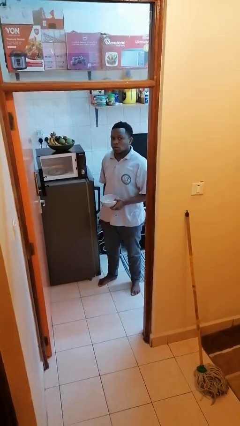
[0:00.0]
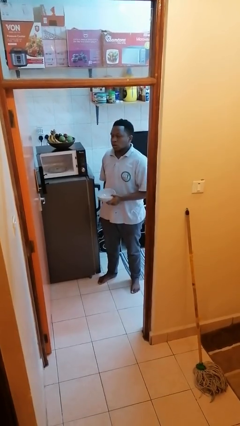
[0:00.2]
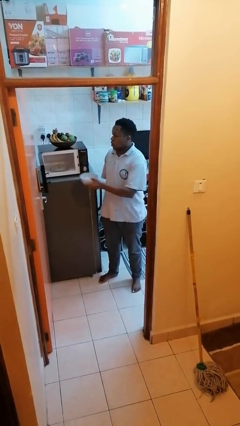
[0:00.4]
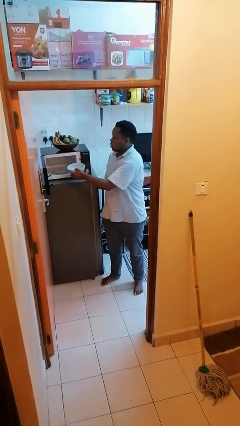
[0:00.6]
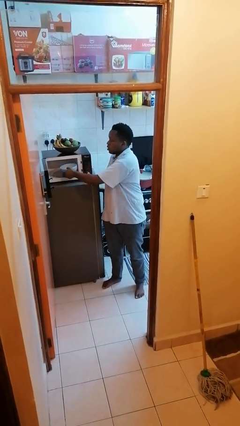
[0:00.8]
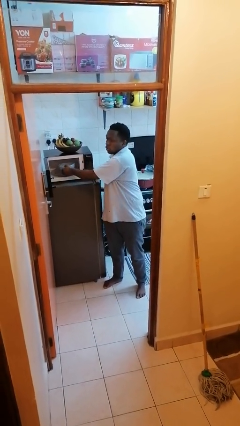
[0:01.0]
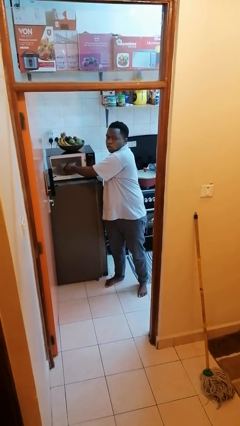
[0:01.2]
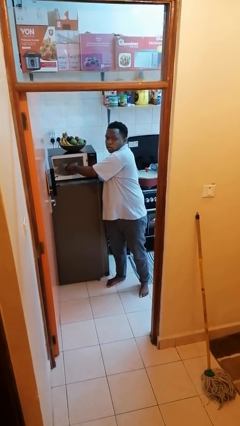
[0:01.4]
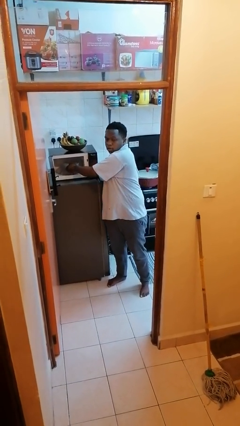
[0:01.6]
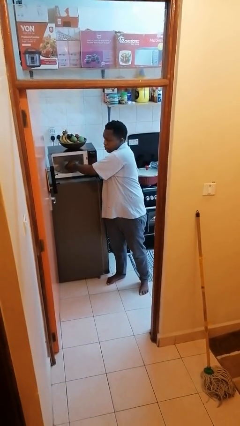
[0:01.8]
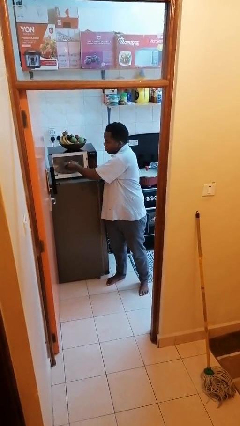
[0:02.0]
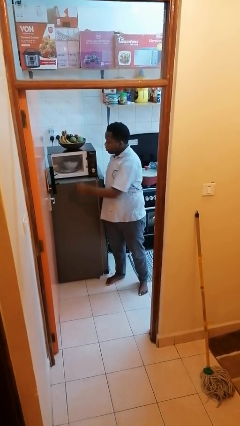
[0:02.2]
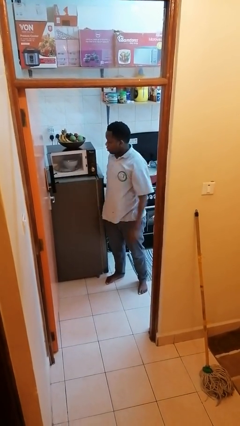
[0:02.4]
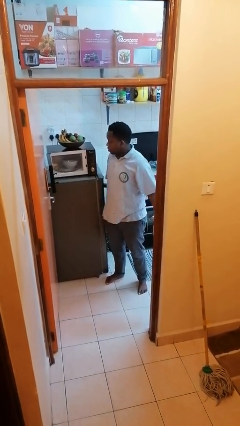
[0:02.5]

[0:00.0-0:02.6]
person puts object into microwave

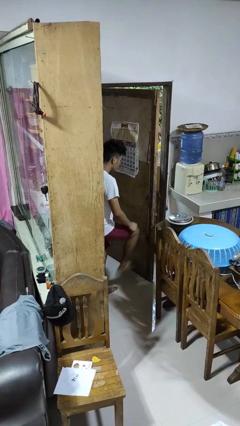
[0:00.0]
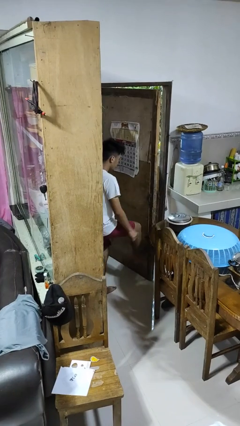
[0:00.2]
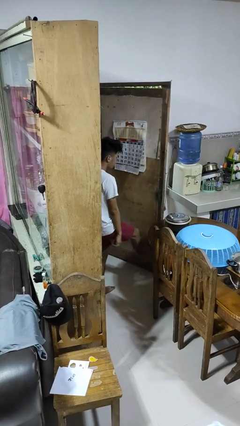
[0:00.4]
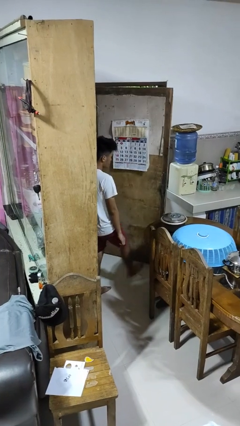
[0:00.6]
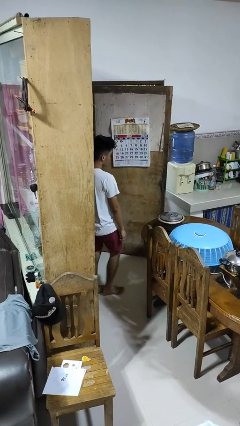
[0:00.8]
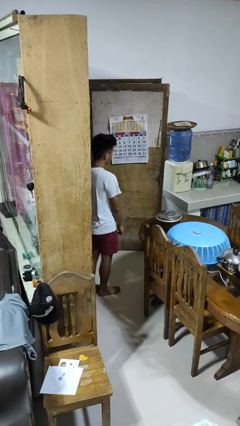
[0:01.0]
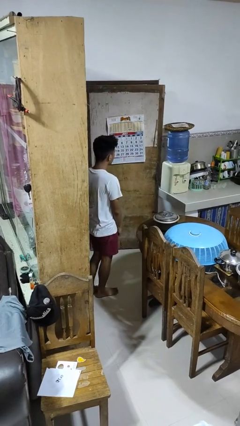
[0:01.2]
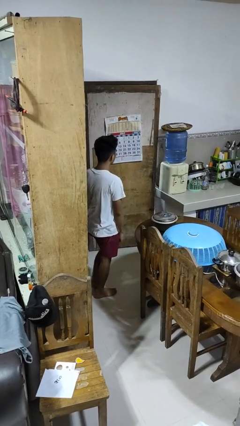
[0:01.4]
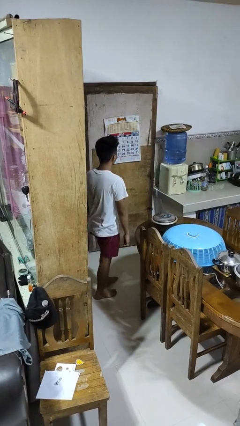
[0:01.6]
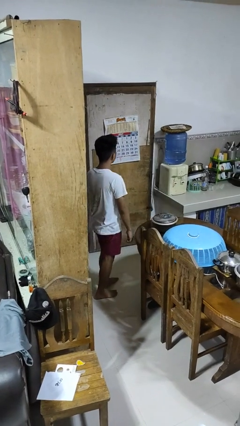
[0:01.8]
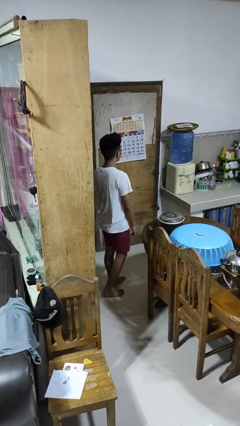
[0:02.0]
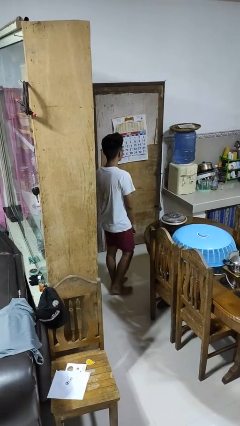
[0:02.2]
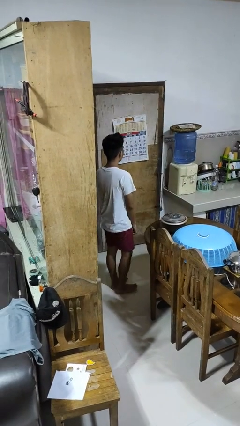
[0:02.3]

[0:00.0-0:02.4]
person closes door with foot

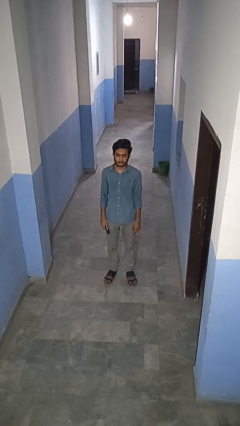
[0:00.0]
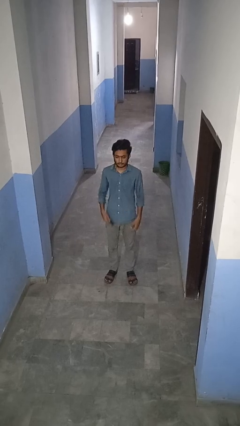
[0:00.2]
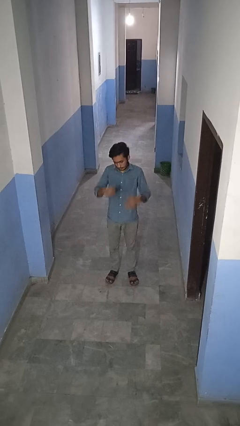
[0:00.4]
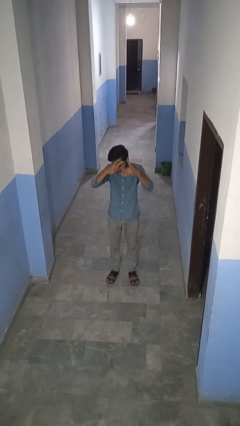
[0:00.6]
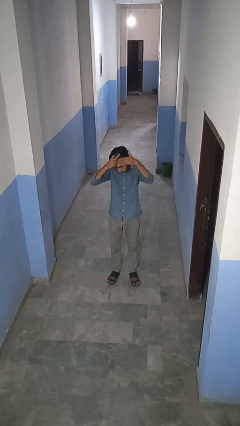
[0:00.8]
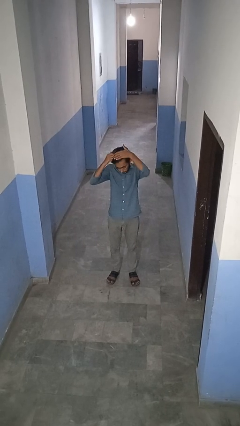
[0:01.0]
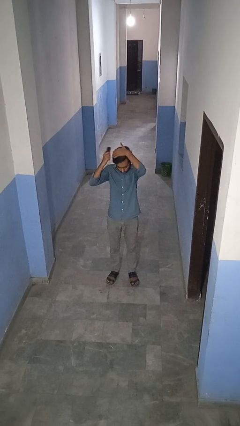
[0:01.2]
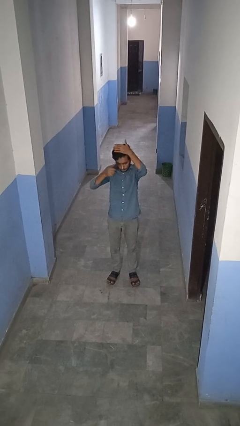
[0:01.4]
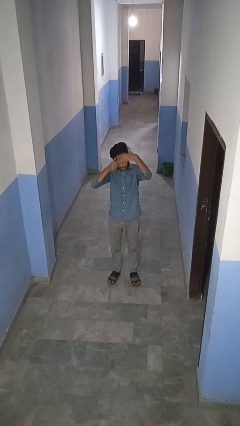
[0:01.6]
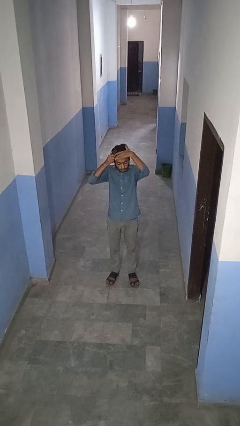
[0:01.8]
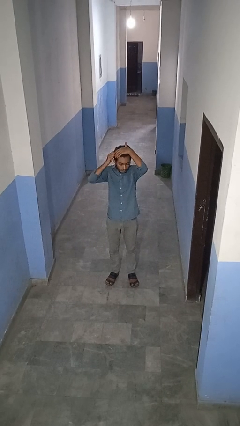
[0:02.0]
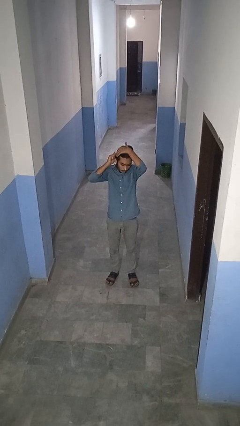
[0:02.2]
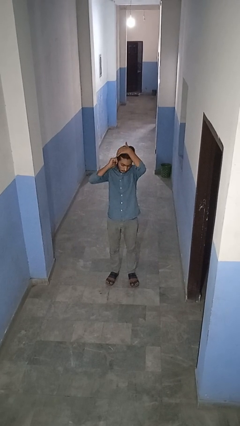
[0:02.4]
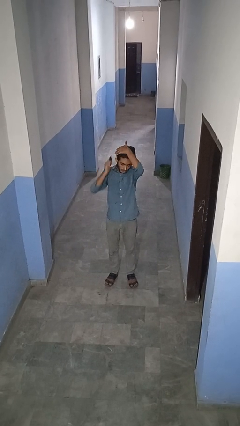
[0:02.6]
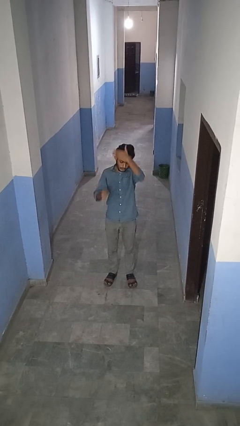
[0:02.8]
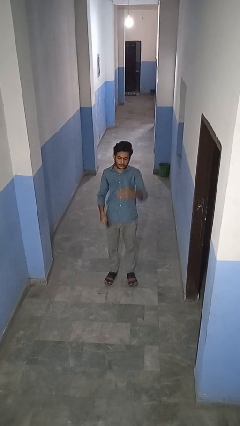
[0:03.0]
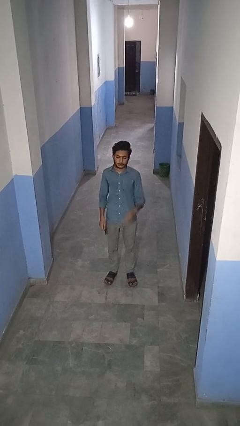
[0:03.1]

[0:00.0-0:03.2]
person brushes hair

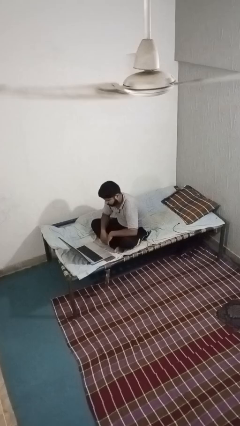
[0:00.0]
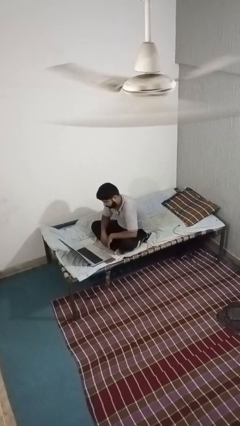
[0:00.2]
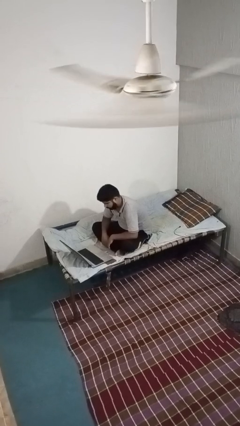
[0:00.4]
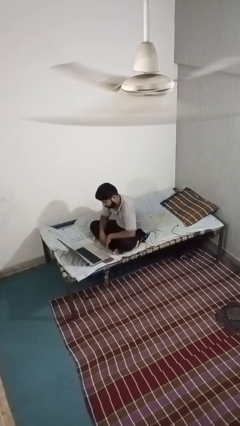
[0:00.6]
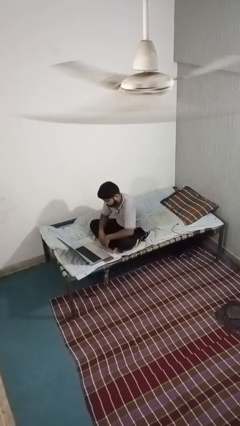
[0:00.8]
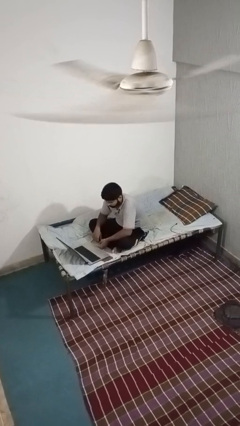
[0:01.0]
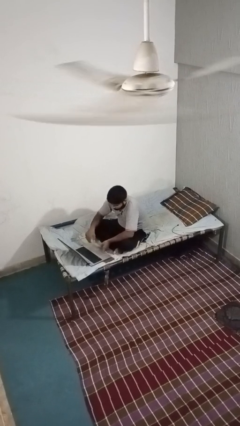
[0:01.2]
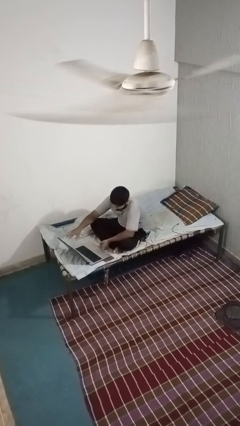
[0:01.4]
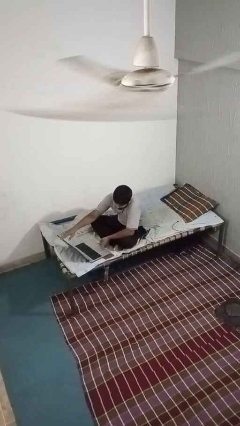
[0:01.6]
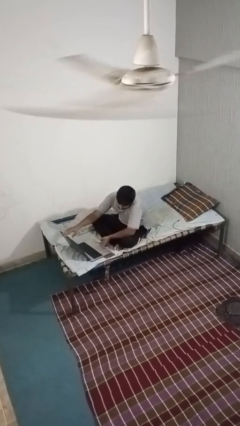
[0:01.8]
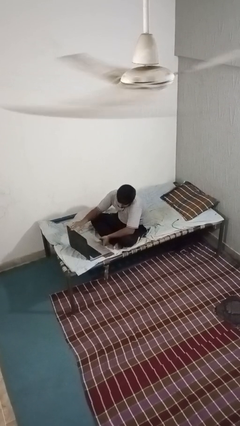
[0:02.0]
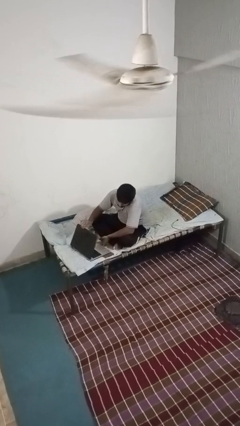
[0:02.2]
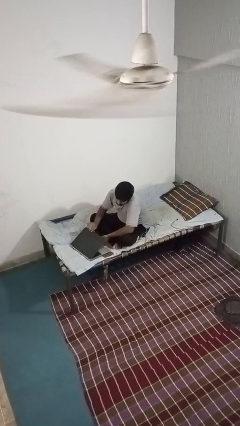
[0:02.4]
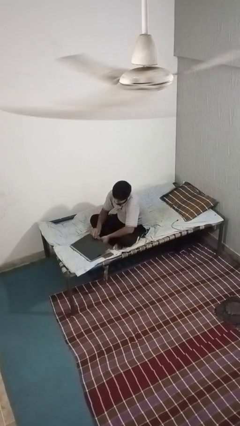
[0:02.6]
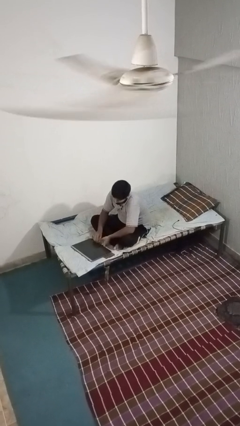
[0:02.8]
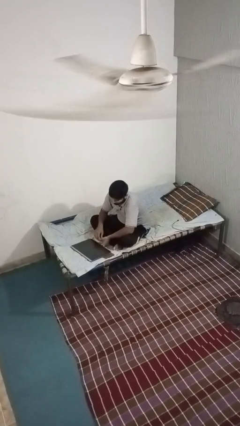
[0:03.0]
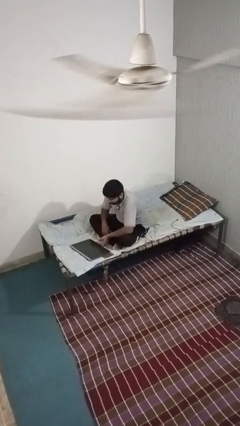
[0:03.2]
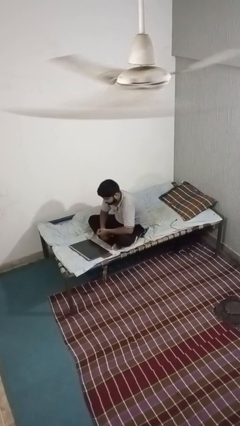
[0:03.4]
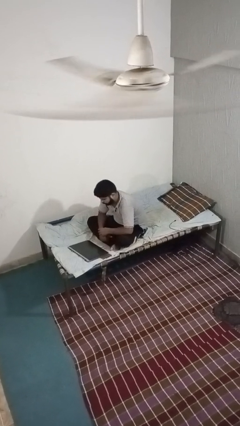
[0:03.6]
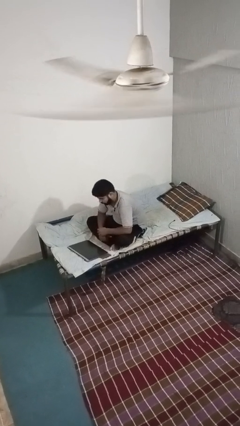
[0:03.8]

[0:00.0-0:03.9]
person closes laptop

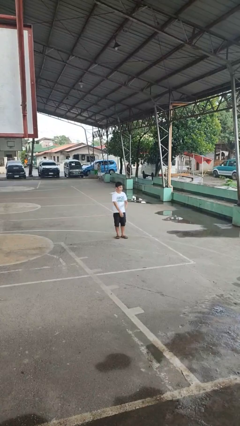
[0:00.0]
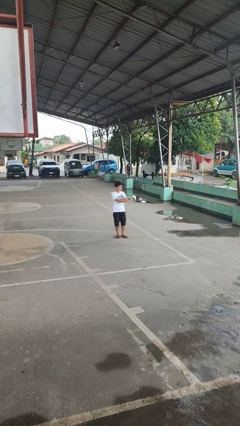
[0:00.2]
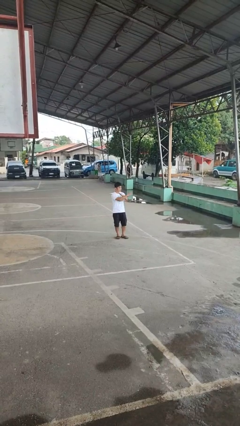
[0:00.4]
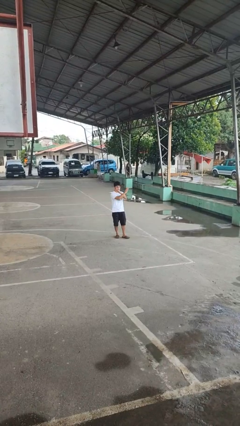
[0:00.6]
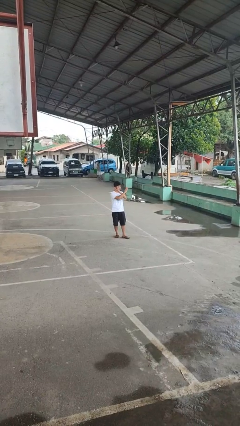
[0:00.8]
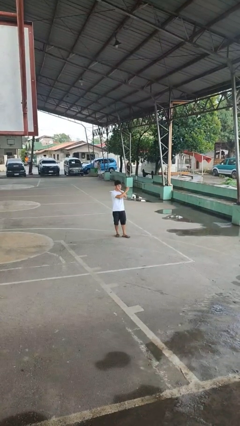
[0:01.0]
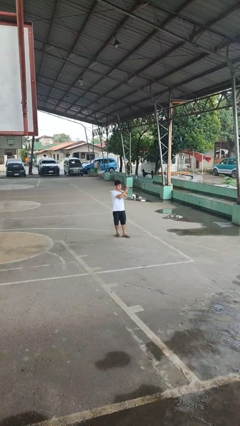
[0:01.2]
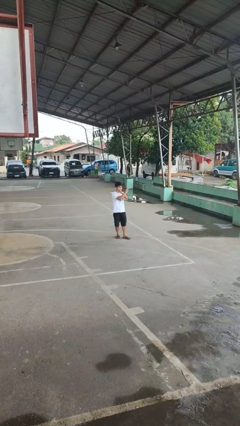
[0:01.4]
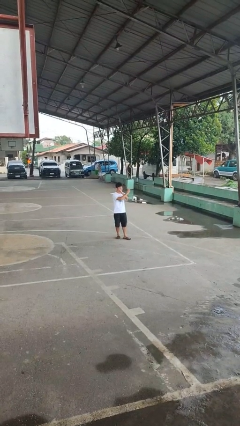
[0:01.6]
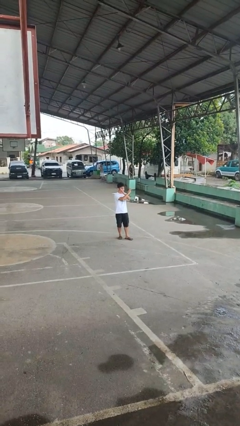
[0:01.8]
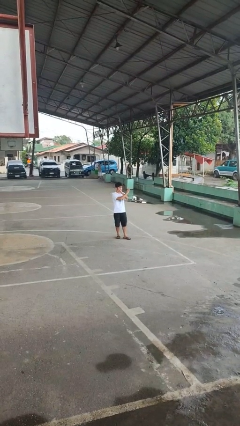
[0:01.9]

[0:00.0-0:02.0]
person gestures arms x

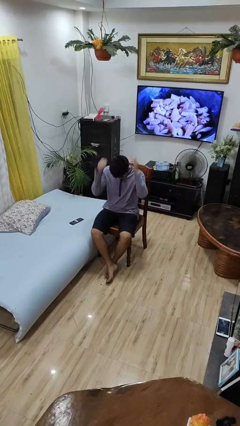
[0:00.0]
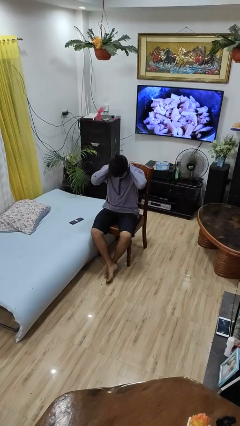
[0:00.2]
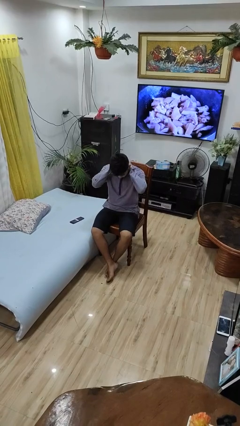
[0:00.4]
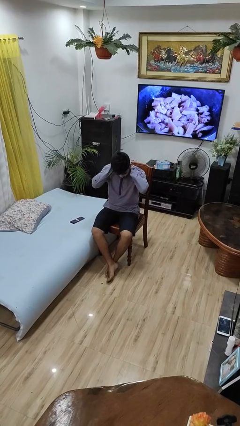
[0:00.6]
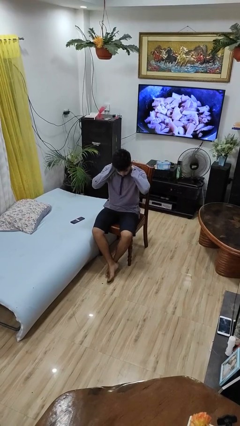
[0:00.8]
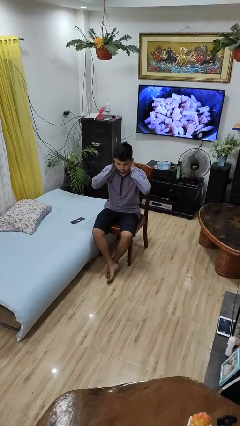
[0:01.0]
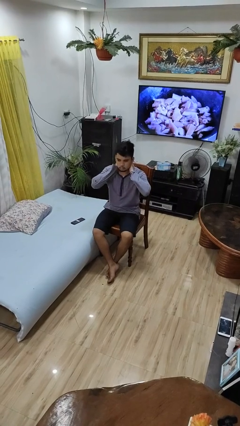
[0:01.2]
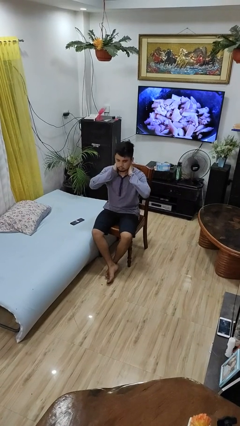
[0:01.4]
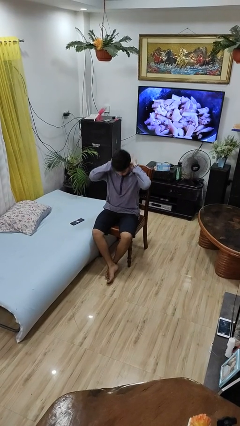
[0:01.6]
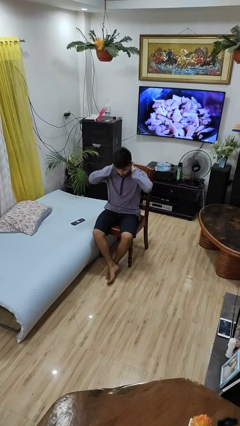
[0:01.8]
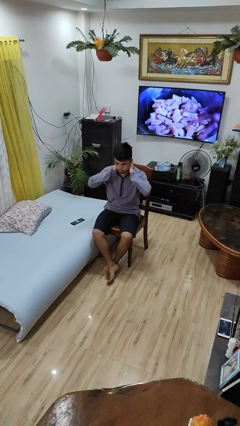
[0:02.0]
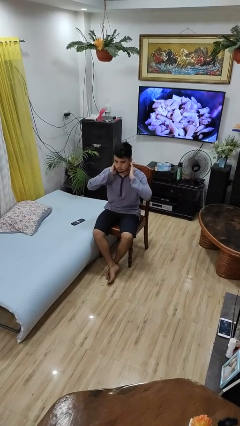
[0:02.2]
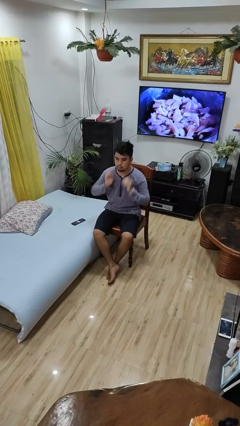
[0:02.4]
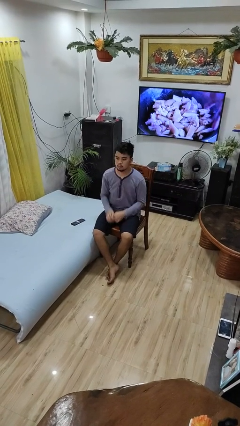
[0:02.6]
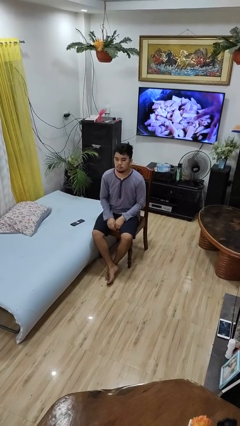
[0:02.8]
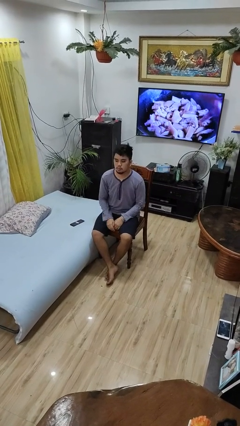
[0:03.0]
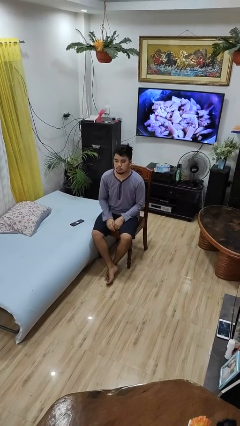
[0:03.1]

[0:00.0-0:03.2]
person rubs neck
